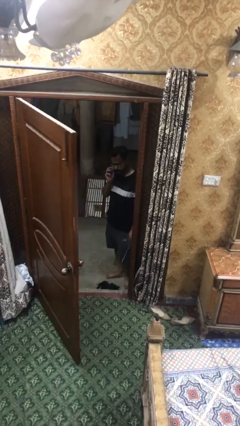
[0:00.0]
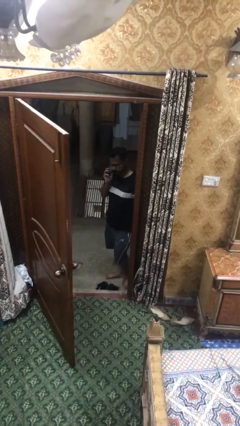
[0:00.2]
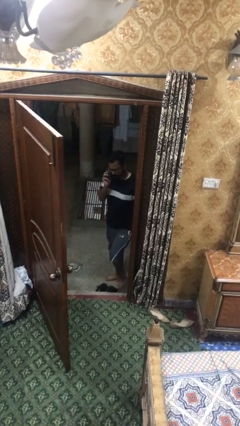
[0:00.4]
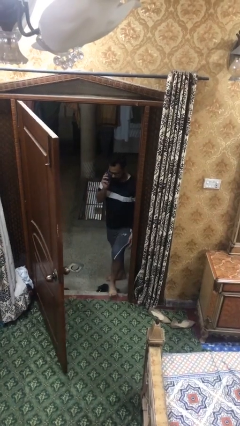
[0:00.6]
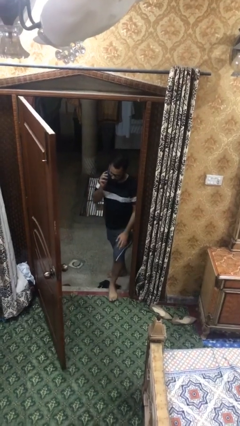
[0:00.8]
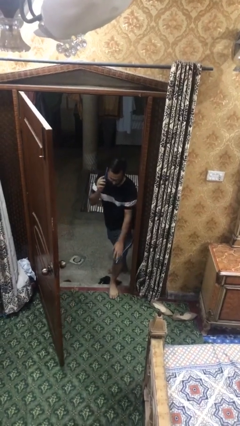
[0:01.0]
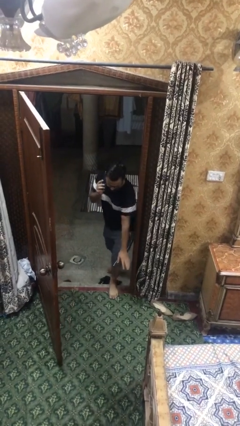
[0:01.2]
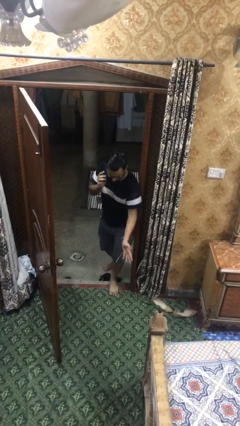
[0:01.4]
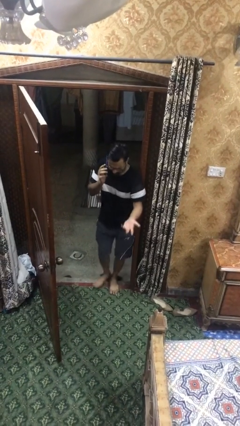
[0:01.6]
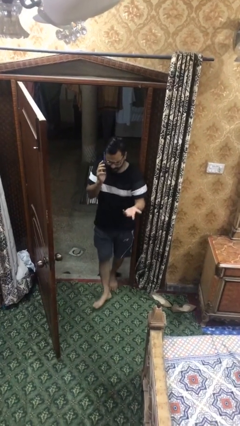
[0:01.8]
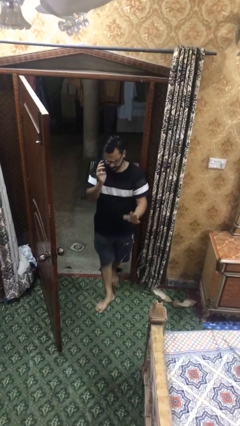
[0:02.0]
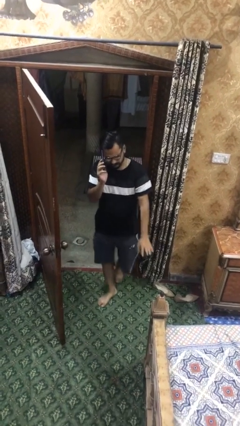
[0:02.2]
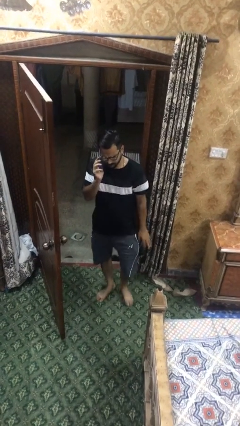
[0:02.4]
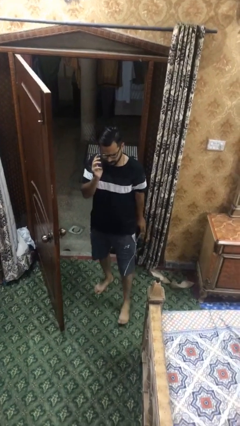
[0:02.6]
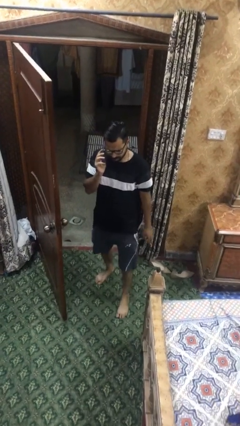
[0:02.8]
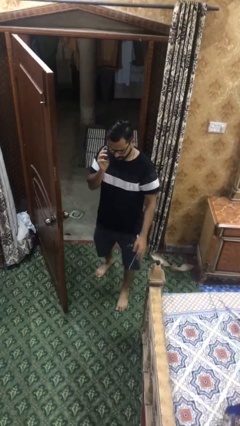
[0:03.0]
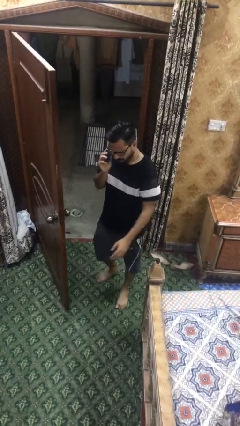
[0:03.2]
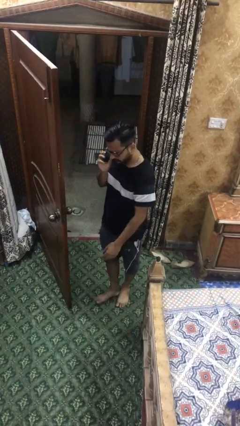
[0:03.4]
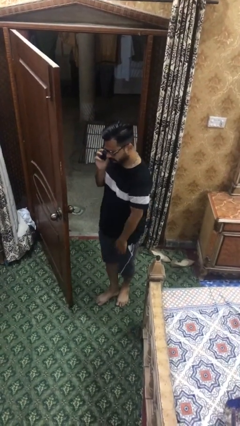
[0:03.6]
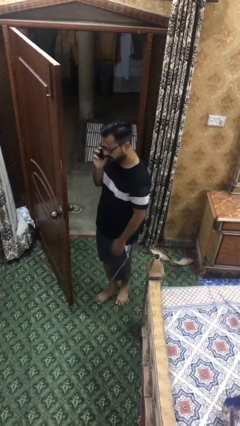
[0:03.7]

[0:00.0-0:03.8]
person enters scene through structure

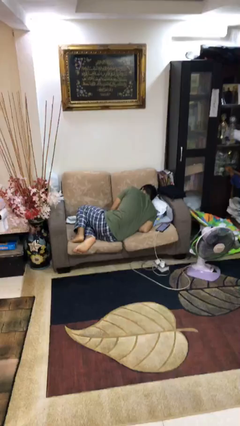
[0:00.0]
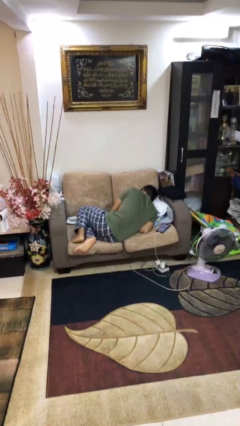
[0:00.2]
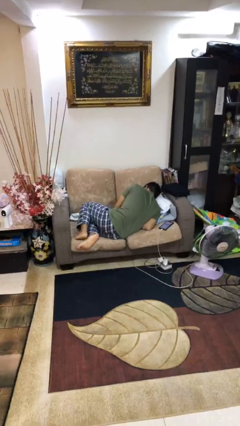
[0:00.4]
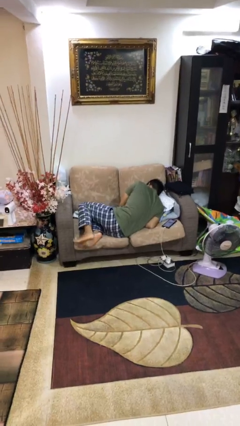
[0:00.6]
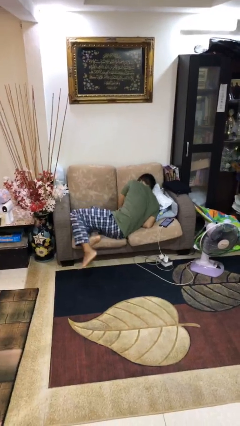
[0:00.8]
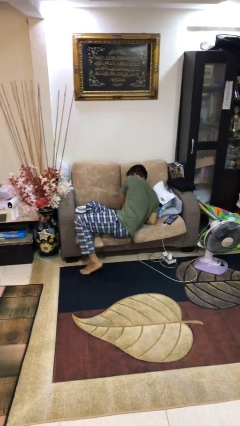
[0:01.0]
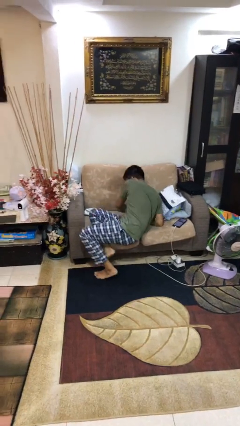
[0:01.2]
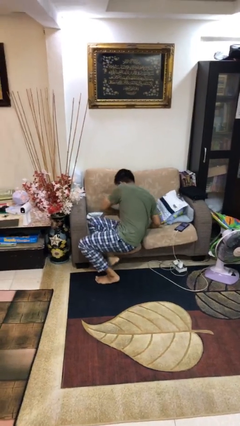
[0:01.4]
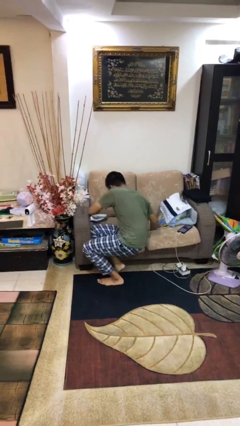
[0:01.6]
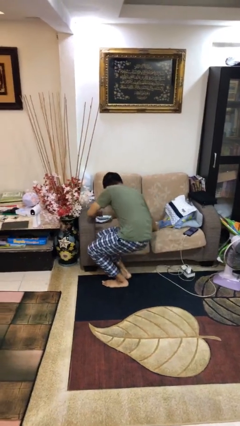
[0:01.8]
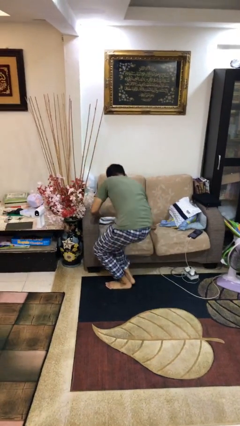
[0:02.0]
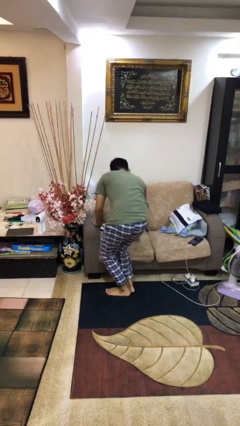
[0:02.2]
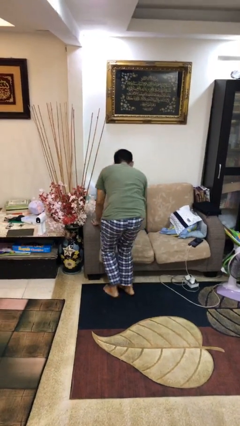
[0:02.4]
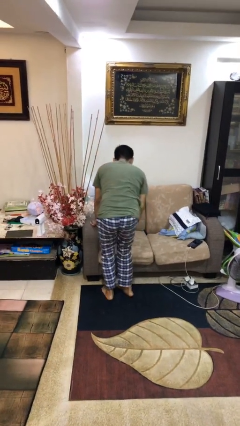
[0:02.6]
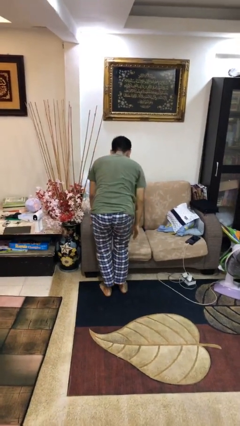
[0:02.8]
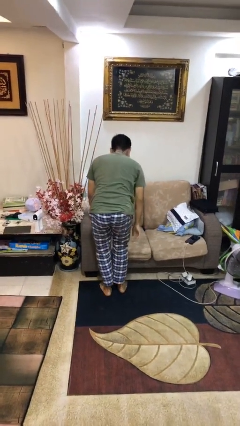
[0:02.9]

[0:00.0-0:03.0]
person stands up

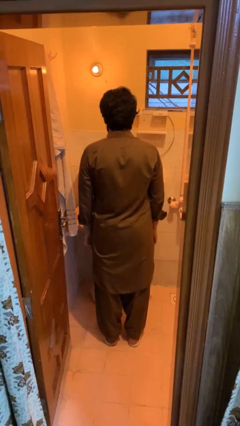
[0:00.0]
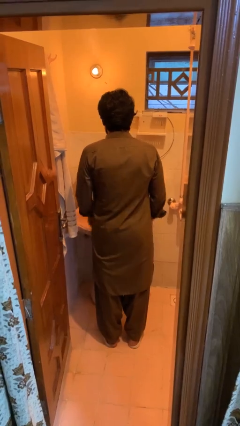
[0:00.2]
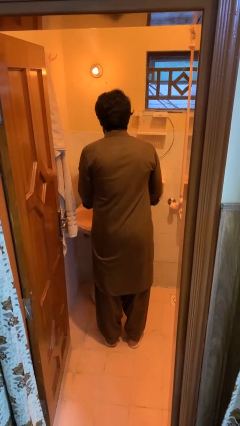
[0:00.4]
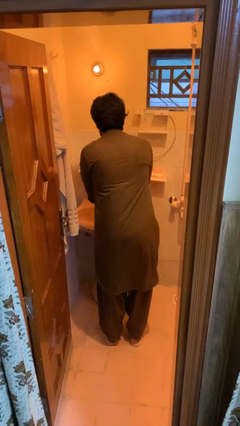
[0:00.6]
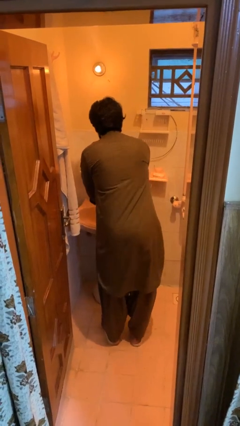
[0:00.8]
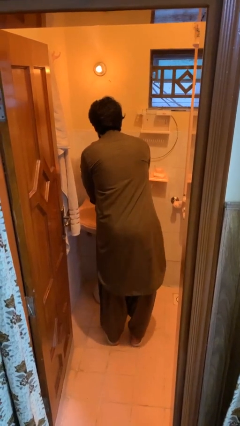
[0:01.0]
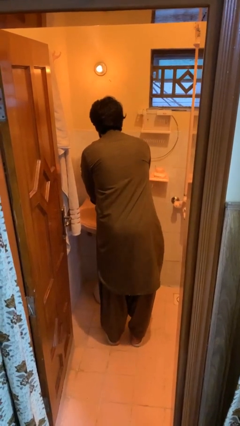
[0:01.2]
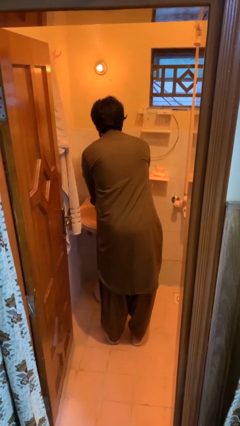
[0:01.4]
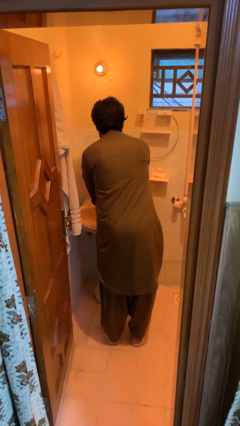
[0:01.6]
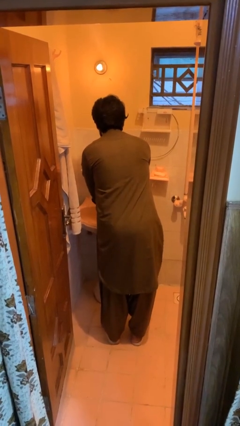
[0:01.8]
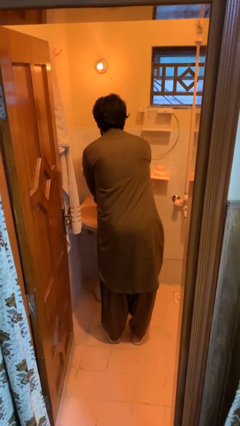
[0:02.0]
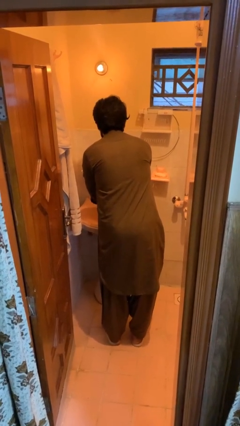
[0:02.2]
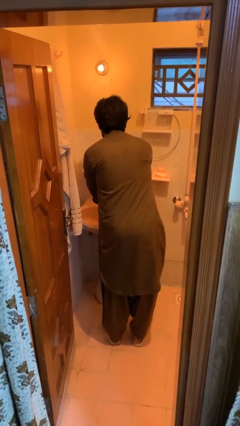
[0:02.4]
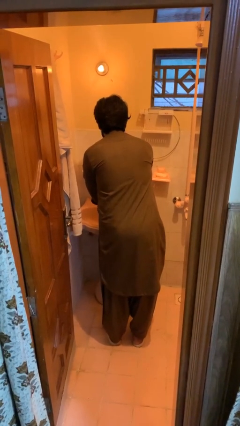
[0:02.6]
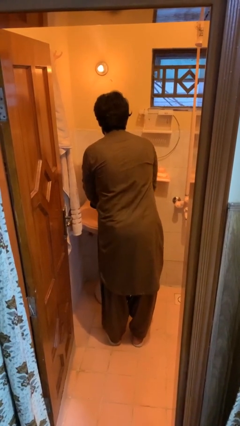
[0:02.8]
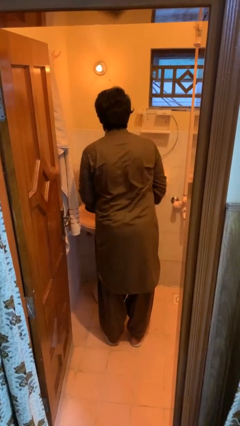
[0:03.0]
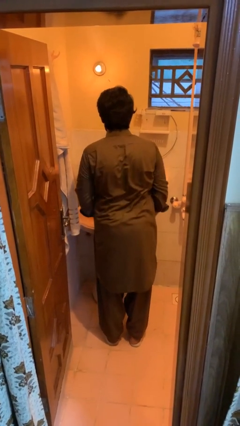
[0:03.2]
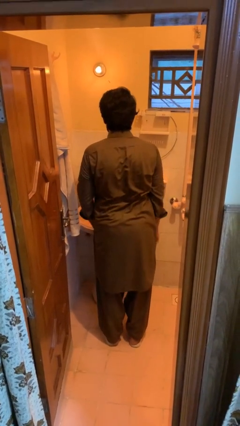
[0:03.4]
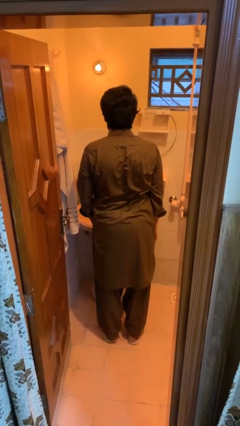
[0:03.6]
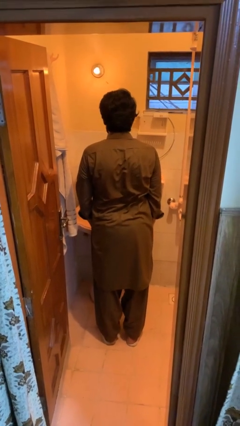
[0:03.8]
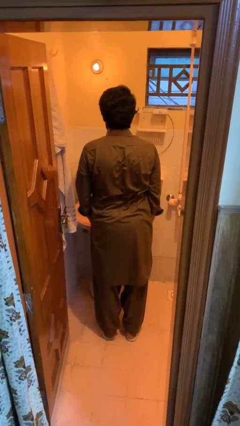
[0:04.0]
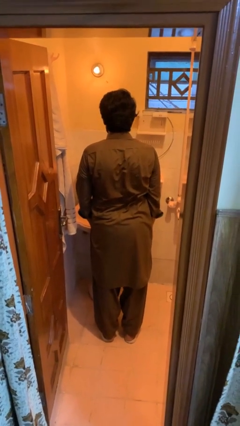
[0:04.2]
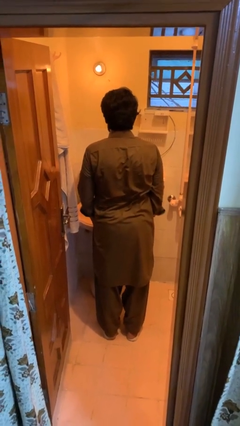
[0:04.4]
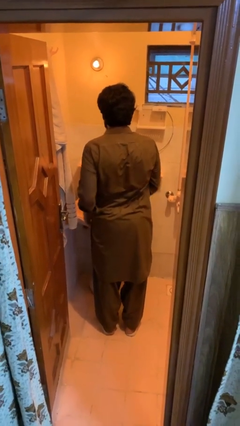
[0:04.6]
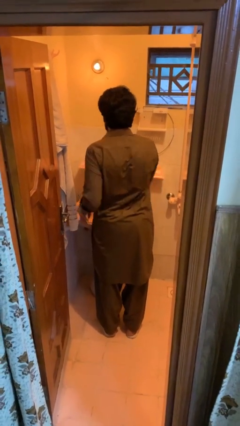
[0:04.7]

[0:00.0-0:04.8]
person washes hands

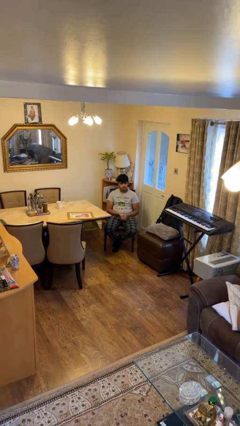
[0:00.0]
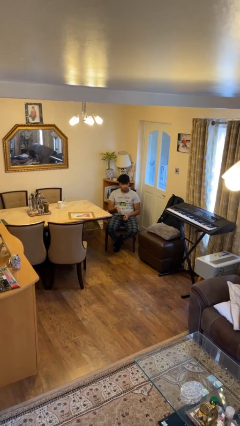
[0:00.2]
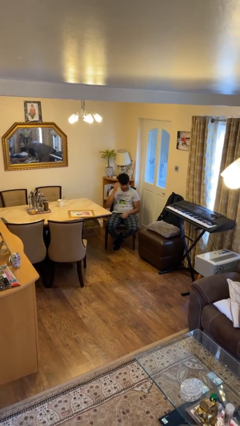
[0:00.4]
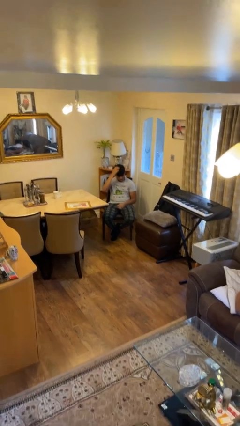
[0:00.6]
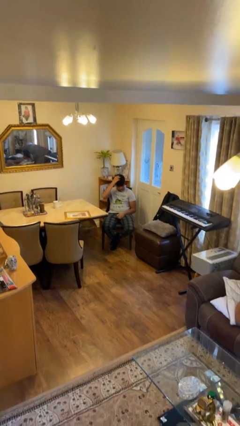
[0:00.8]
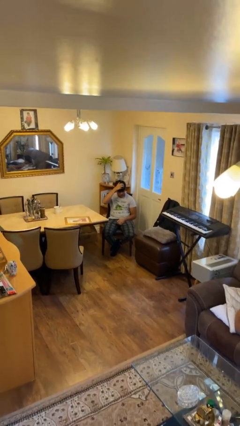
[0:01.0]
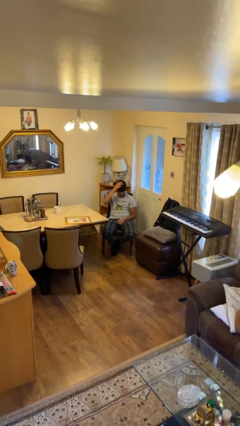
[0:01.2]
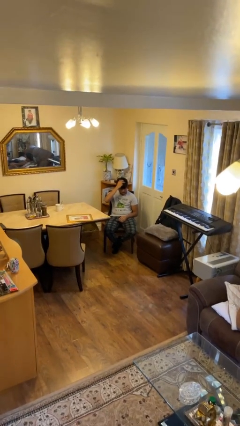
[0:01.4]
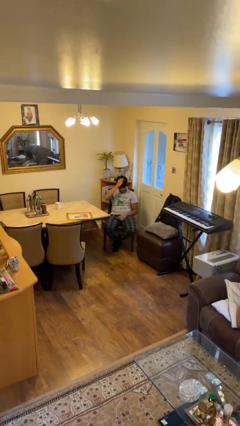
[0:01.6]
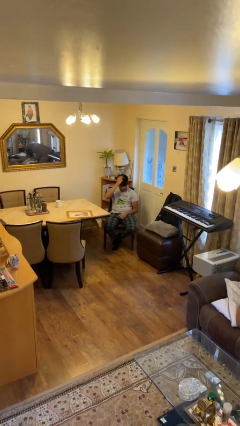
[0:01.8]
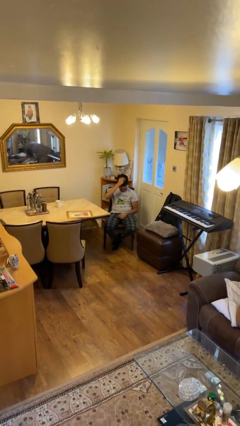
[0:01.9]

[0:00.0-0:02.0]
person strokes hair

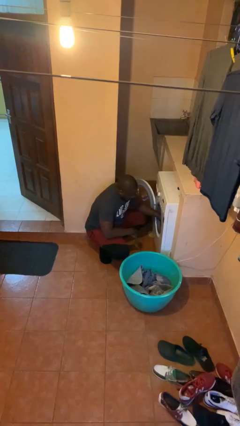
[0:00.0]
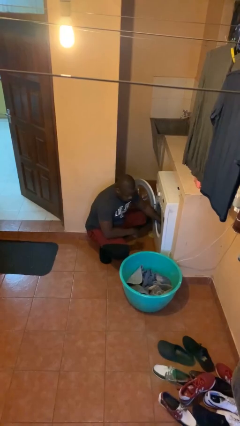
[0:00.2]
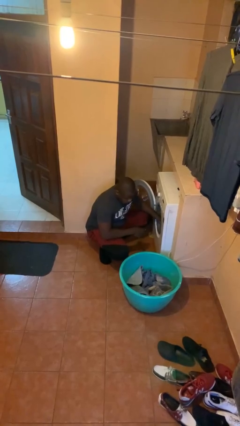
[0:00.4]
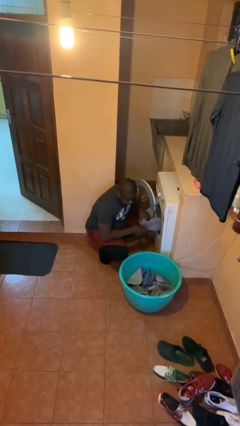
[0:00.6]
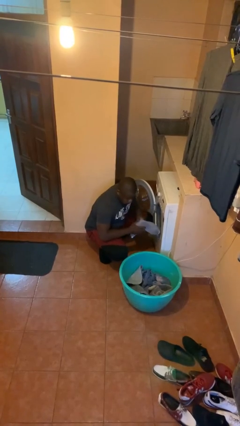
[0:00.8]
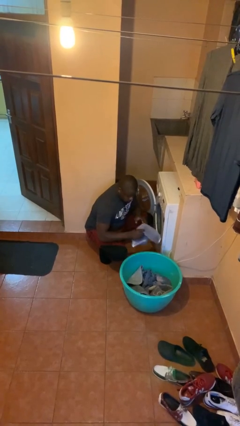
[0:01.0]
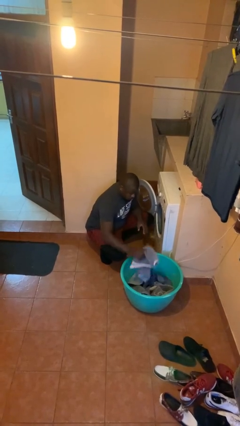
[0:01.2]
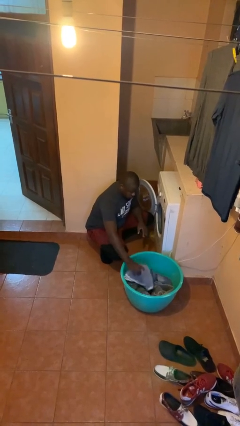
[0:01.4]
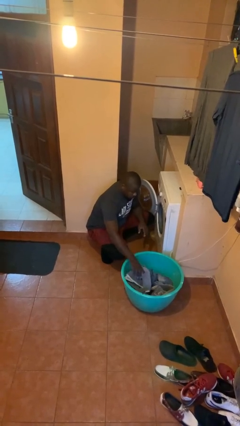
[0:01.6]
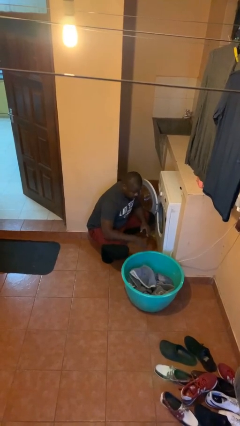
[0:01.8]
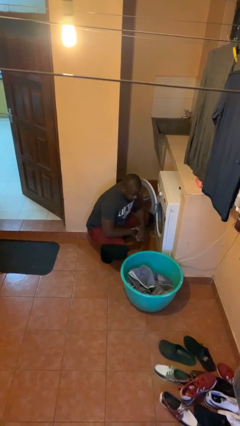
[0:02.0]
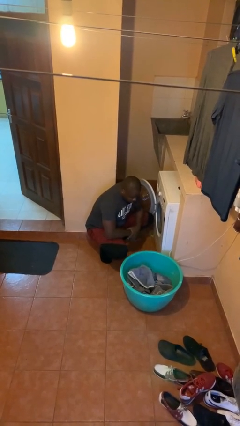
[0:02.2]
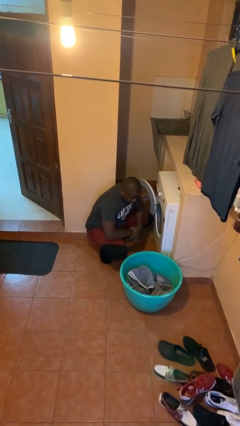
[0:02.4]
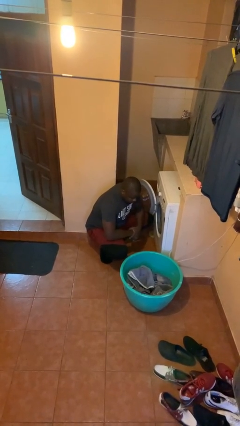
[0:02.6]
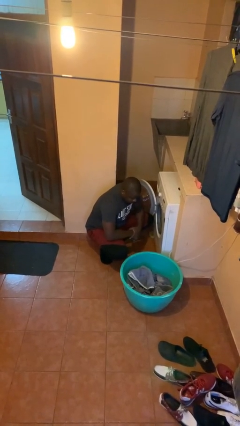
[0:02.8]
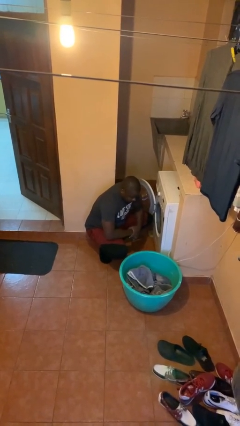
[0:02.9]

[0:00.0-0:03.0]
person unloads dryer

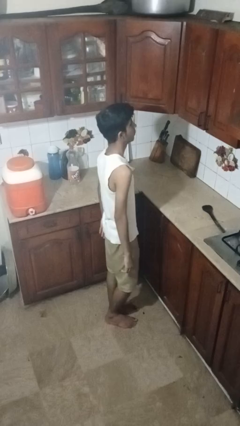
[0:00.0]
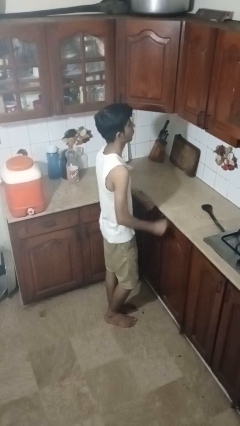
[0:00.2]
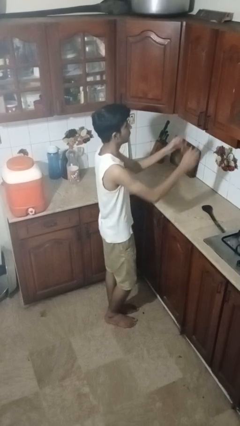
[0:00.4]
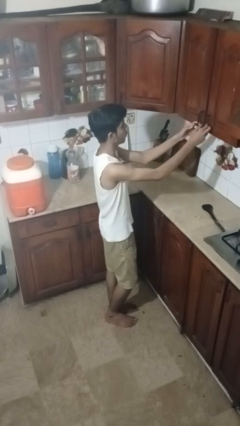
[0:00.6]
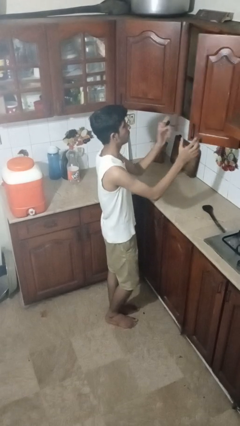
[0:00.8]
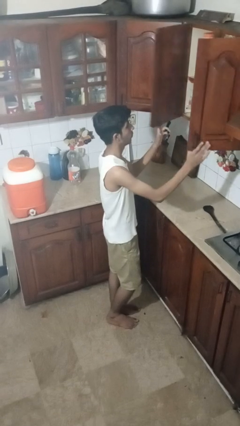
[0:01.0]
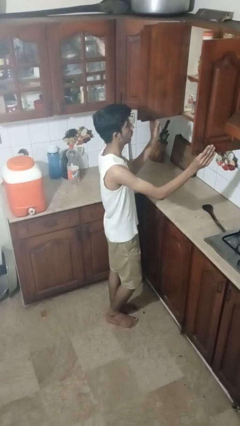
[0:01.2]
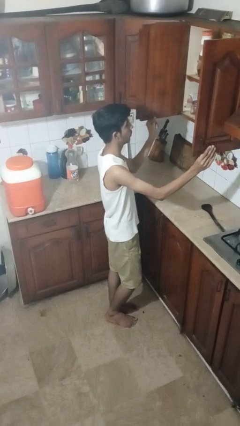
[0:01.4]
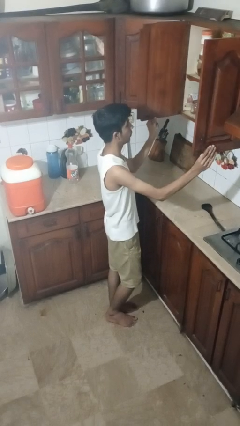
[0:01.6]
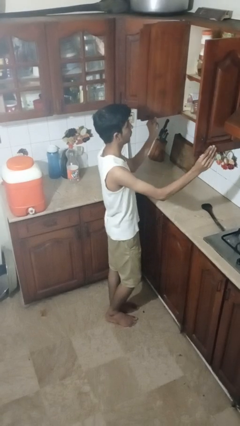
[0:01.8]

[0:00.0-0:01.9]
person opens cabinet
